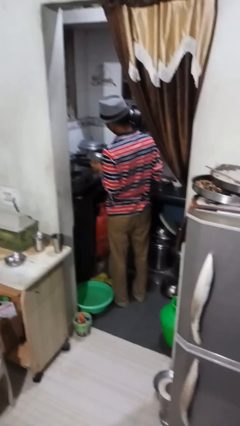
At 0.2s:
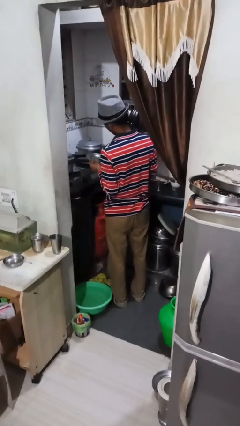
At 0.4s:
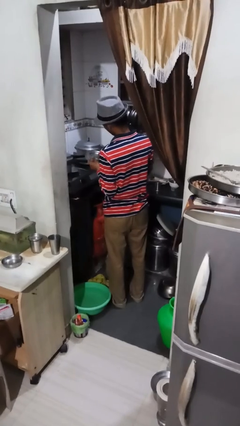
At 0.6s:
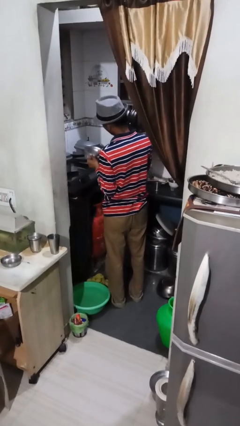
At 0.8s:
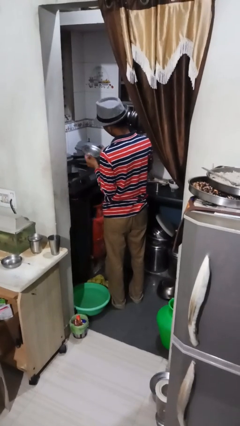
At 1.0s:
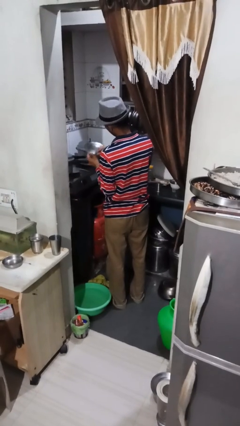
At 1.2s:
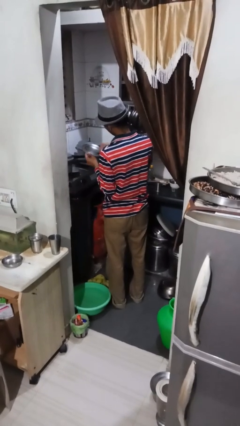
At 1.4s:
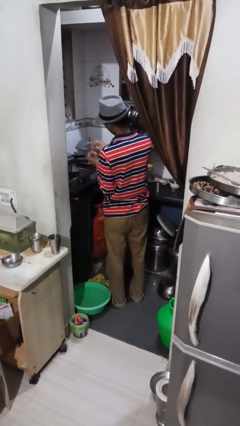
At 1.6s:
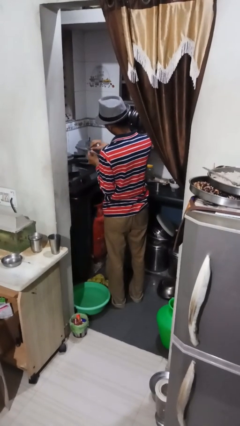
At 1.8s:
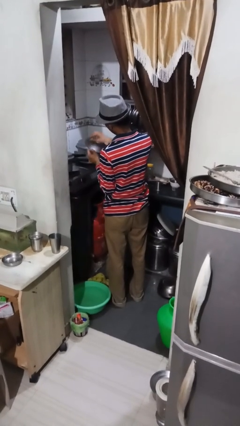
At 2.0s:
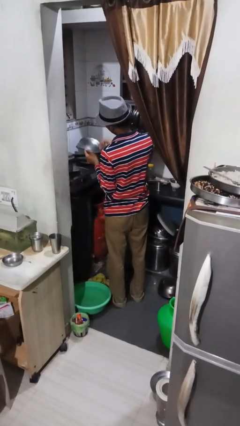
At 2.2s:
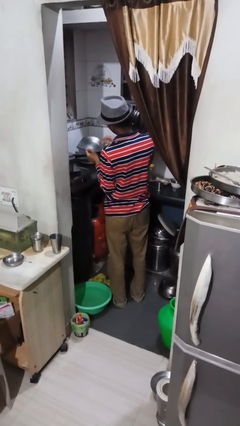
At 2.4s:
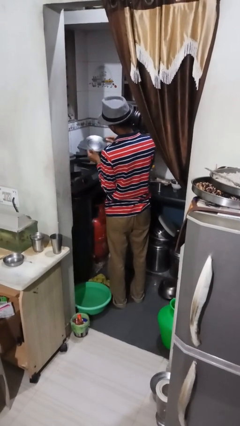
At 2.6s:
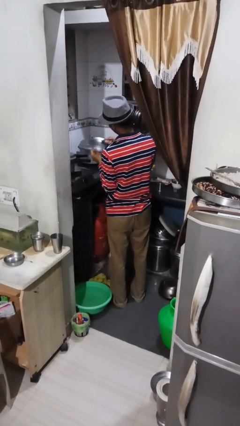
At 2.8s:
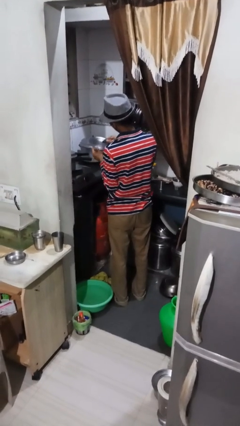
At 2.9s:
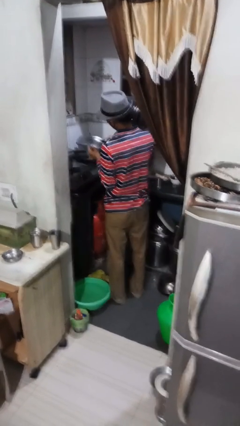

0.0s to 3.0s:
person washes dish

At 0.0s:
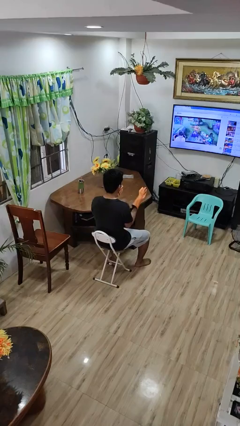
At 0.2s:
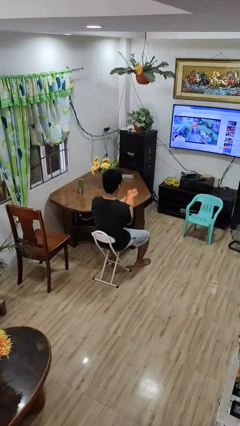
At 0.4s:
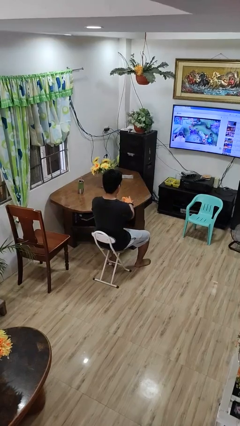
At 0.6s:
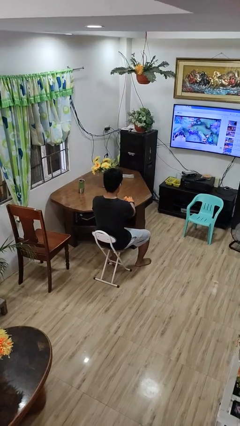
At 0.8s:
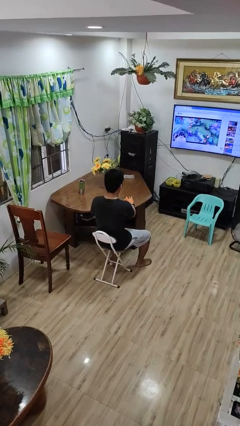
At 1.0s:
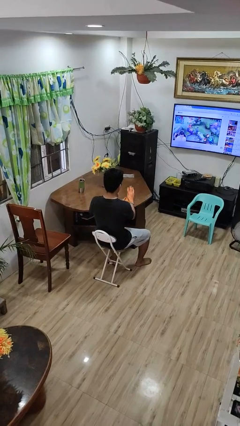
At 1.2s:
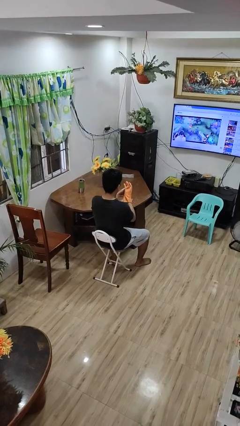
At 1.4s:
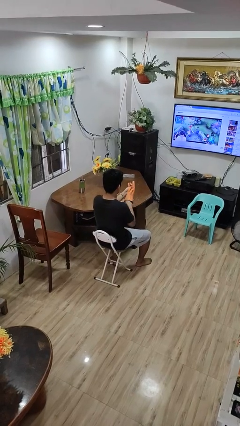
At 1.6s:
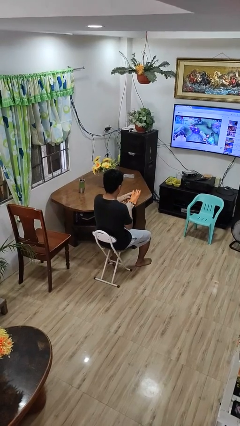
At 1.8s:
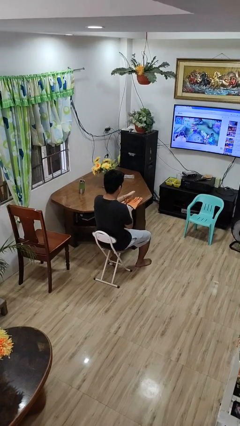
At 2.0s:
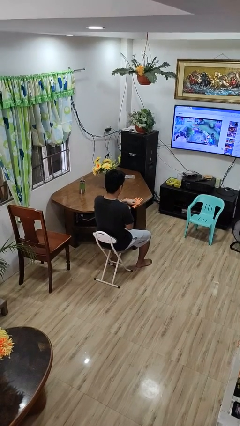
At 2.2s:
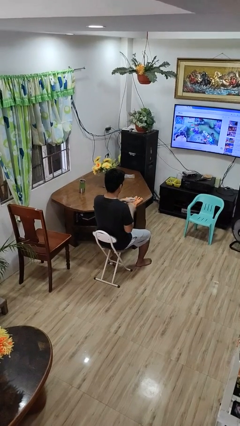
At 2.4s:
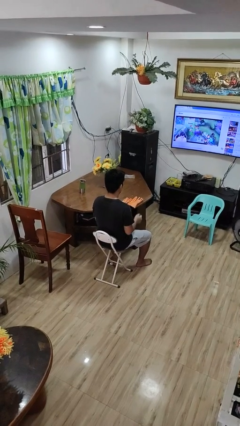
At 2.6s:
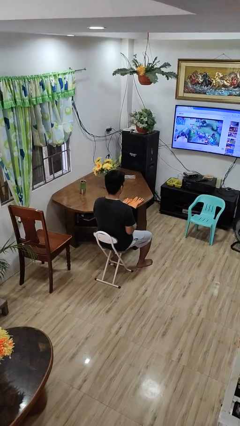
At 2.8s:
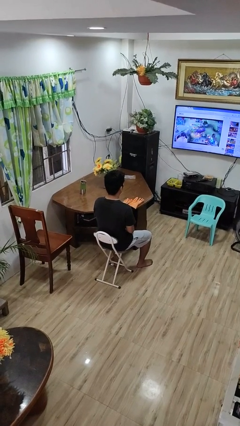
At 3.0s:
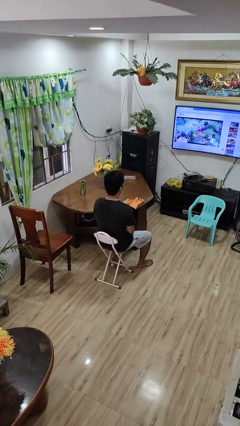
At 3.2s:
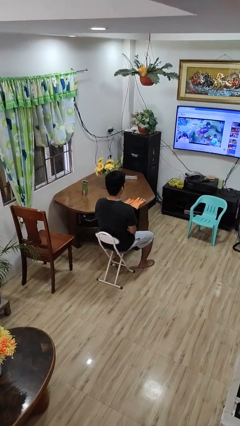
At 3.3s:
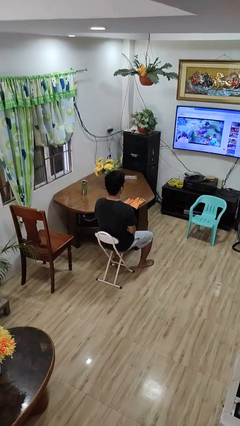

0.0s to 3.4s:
person takes off gloves

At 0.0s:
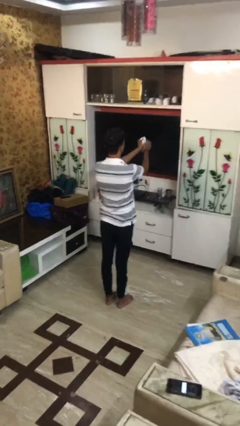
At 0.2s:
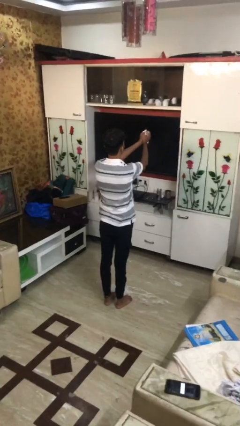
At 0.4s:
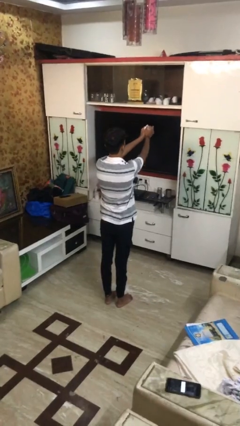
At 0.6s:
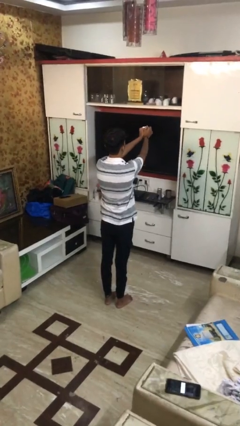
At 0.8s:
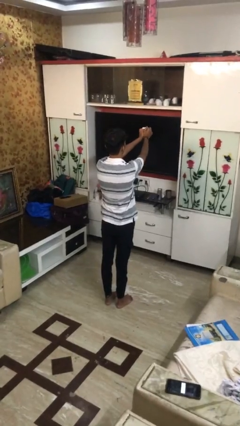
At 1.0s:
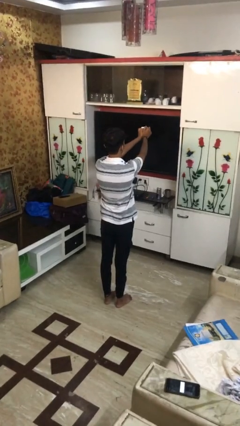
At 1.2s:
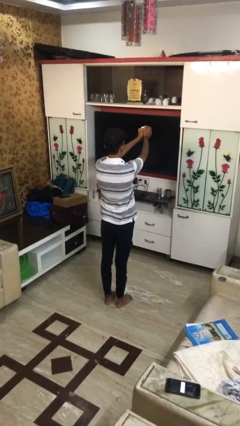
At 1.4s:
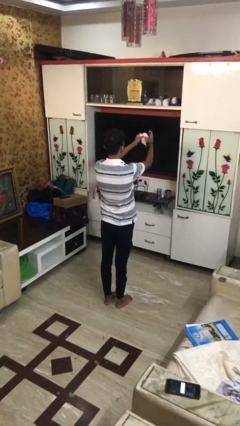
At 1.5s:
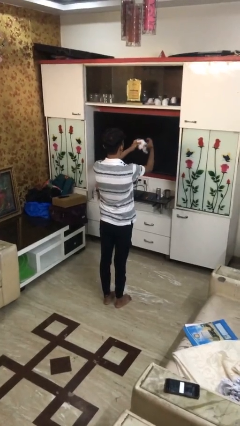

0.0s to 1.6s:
person crumples paper

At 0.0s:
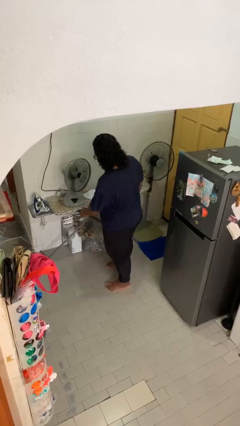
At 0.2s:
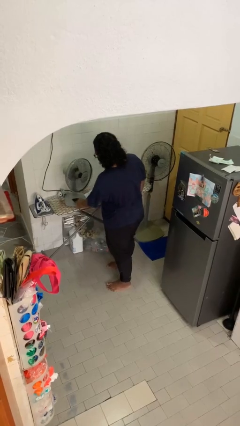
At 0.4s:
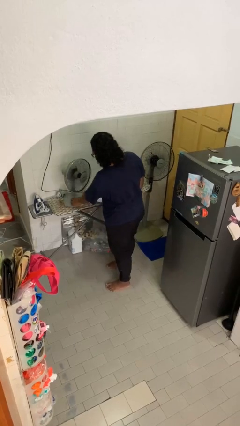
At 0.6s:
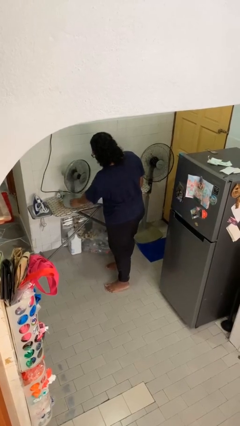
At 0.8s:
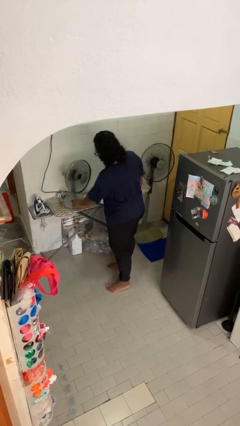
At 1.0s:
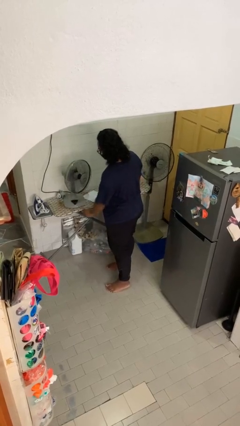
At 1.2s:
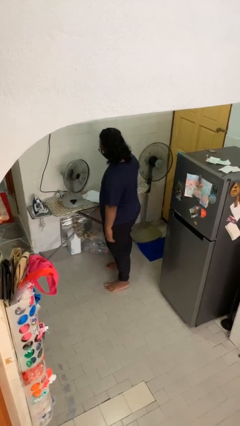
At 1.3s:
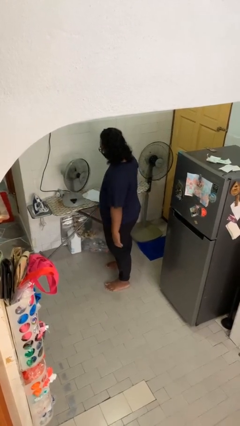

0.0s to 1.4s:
person turns off fan

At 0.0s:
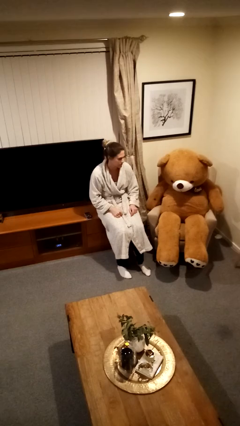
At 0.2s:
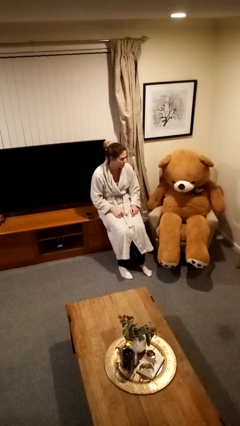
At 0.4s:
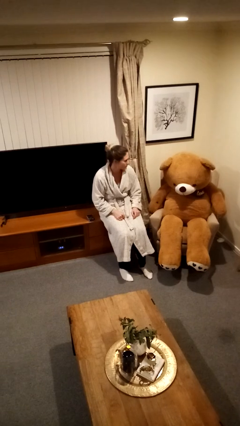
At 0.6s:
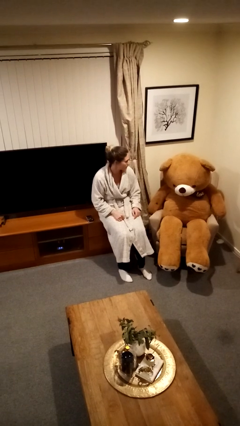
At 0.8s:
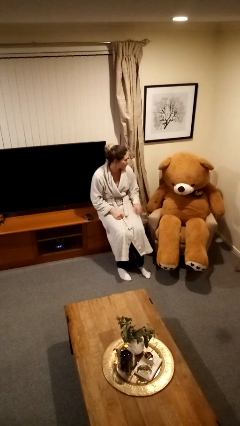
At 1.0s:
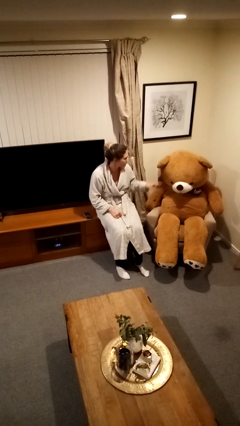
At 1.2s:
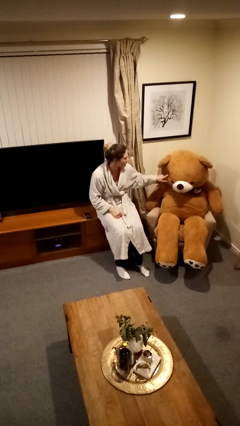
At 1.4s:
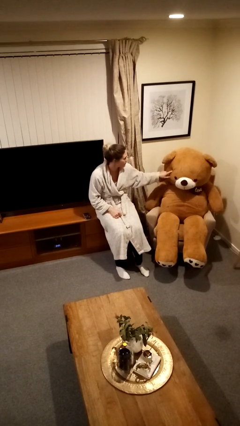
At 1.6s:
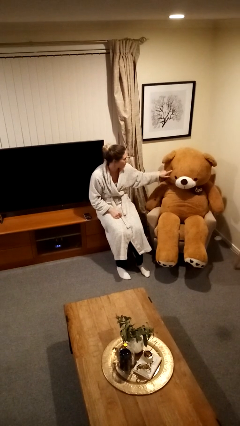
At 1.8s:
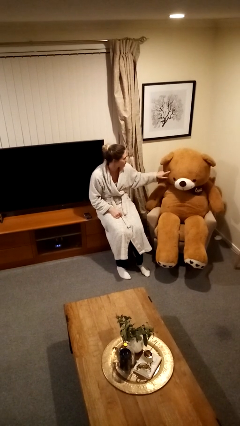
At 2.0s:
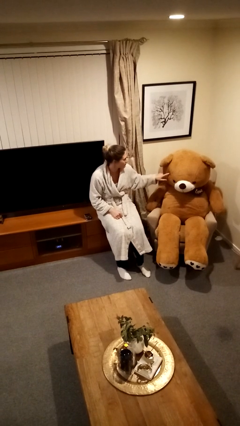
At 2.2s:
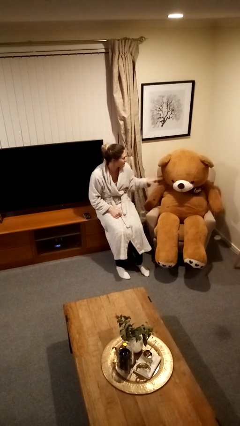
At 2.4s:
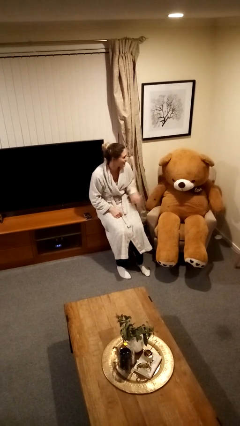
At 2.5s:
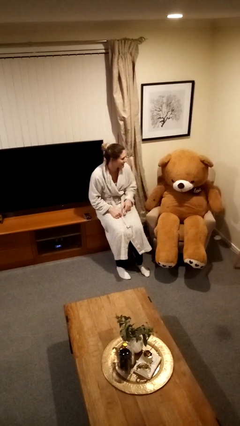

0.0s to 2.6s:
person taps object with finger

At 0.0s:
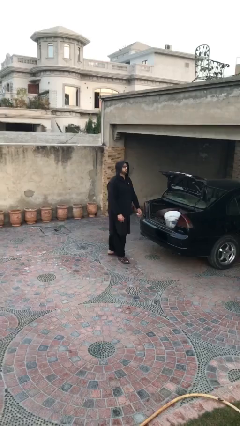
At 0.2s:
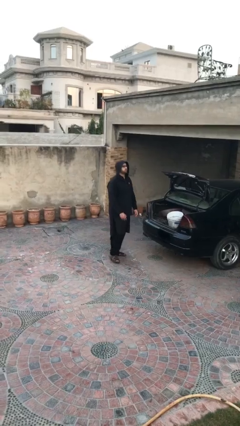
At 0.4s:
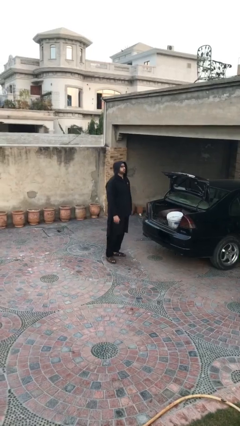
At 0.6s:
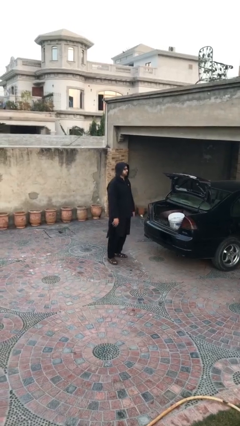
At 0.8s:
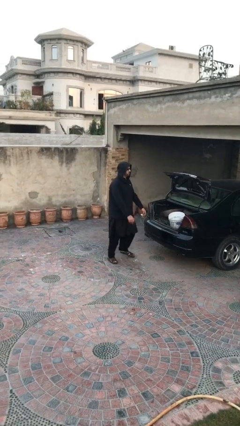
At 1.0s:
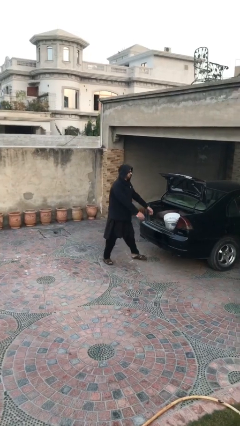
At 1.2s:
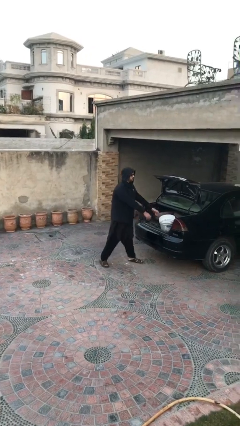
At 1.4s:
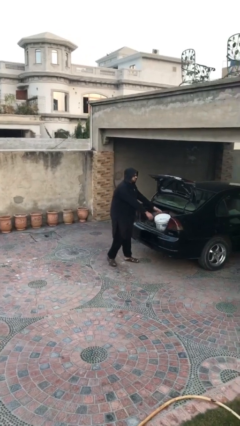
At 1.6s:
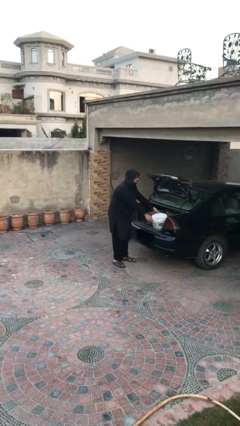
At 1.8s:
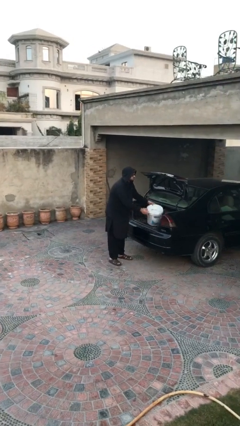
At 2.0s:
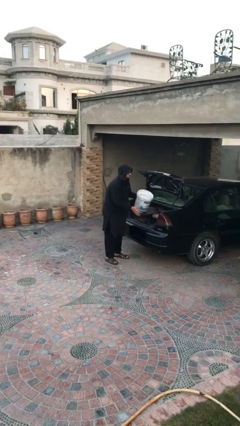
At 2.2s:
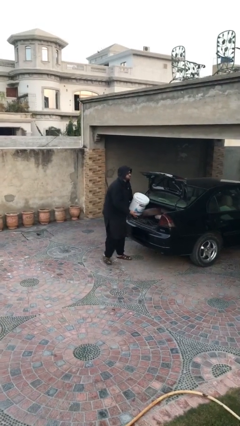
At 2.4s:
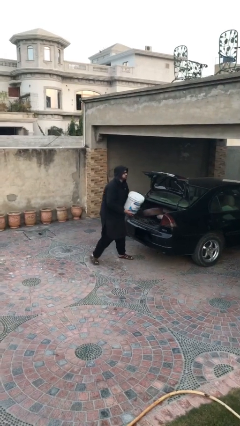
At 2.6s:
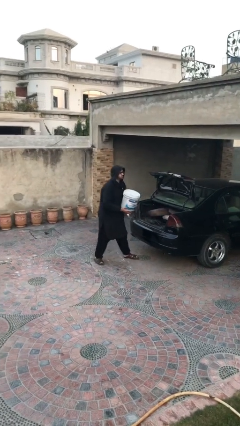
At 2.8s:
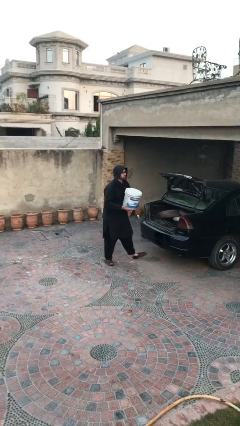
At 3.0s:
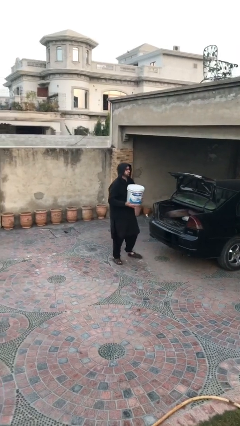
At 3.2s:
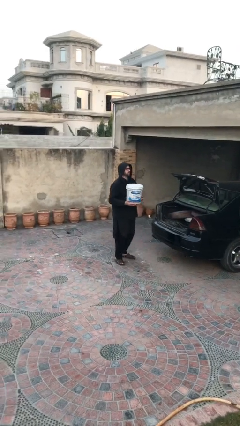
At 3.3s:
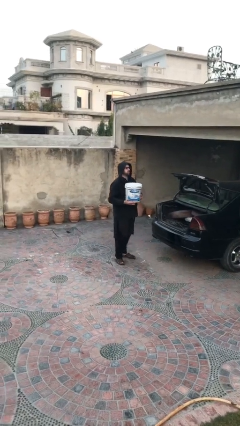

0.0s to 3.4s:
person unloads car

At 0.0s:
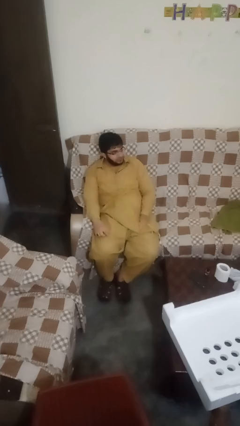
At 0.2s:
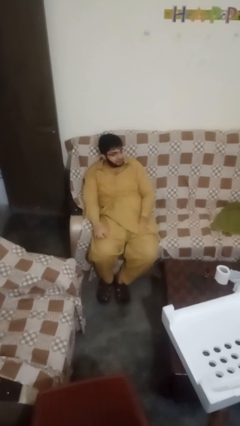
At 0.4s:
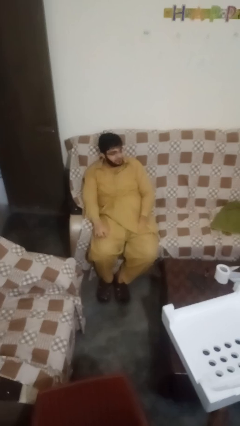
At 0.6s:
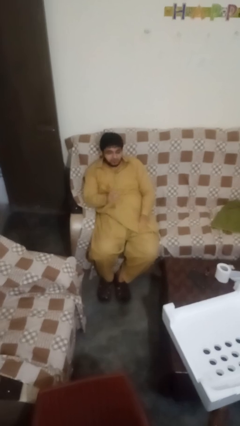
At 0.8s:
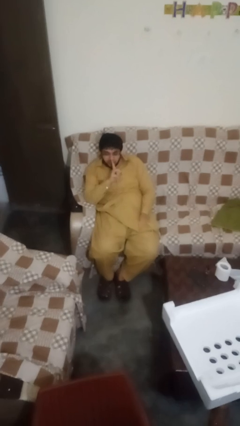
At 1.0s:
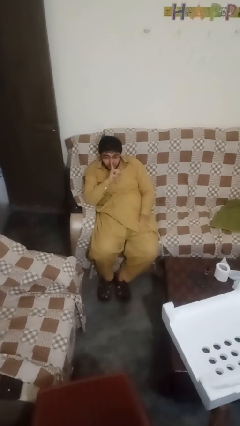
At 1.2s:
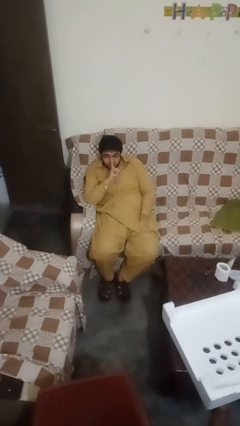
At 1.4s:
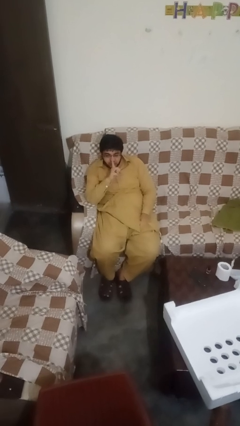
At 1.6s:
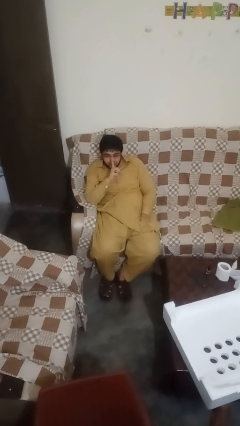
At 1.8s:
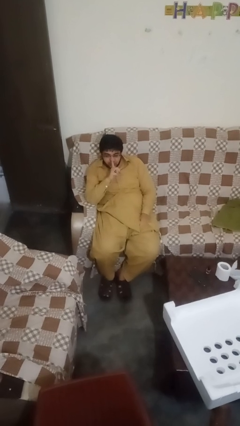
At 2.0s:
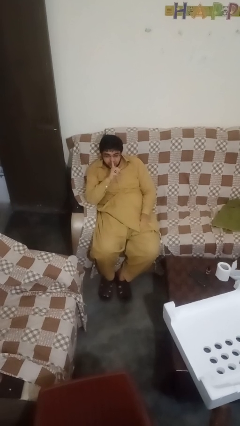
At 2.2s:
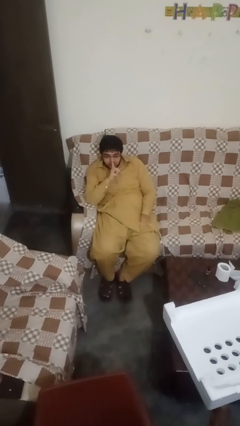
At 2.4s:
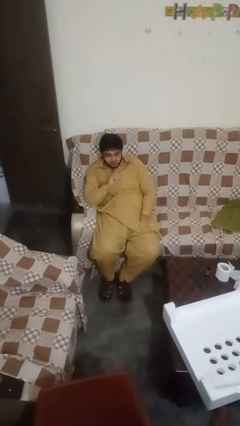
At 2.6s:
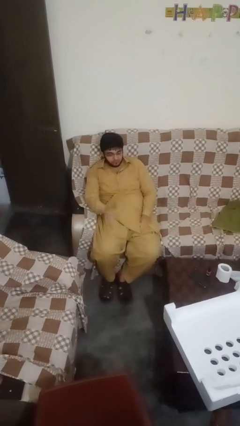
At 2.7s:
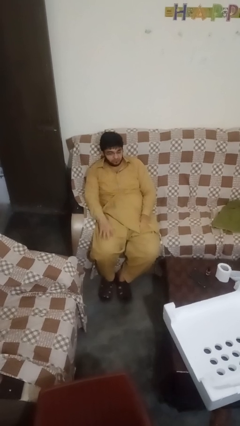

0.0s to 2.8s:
person gestures be quiet
